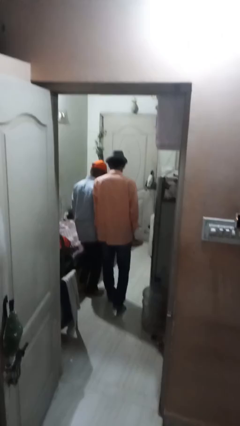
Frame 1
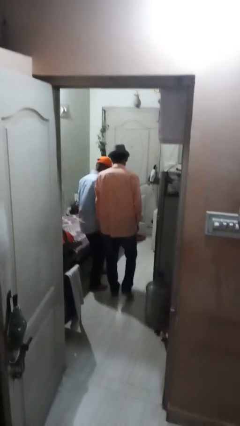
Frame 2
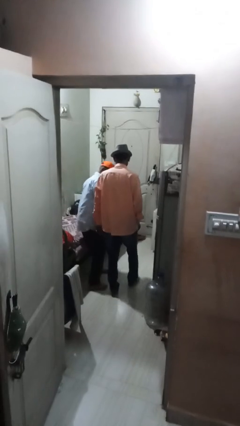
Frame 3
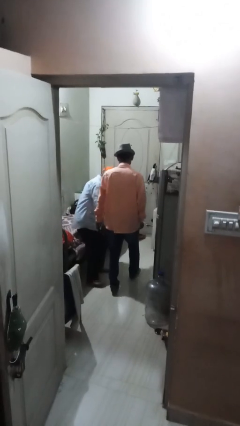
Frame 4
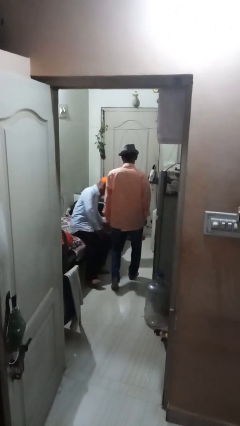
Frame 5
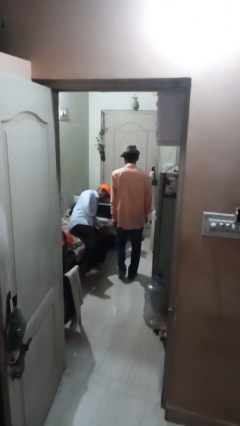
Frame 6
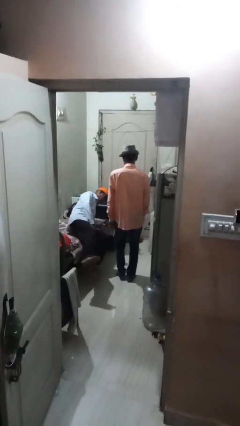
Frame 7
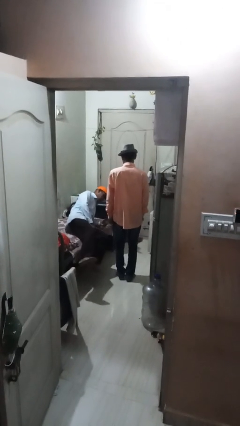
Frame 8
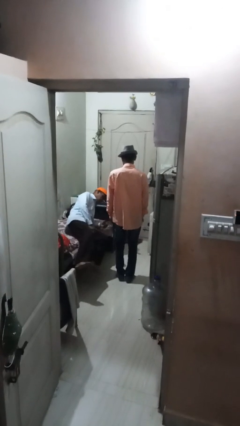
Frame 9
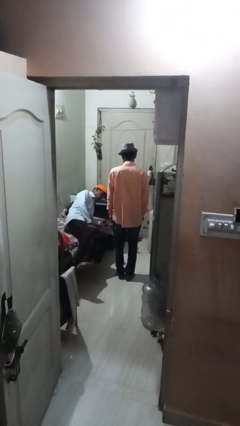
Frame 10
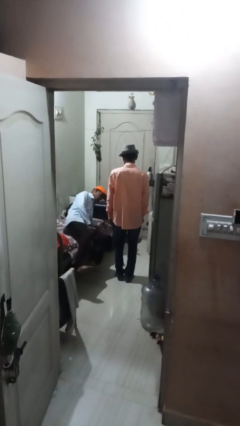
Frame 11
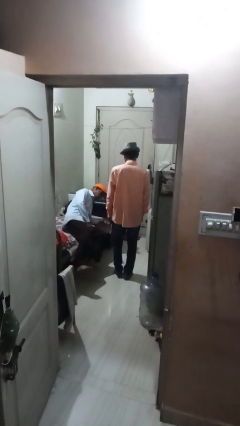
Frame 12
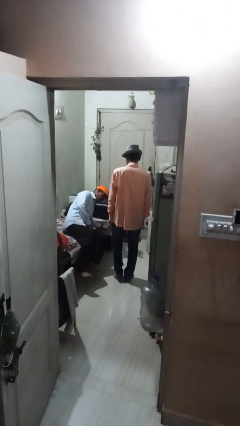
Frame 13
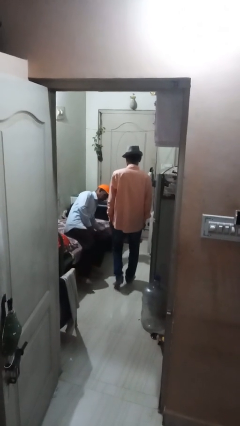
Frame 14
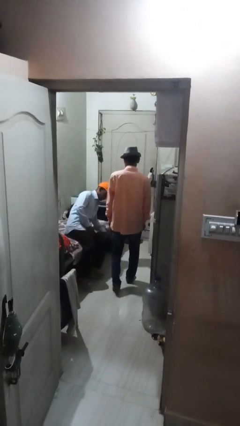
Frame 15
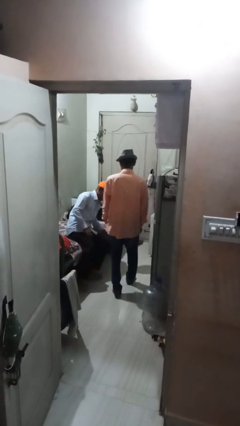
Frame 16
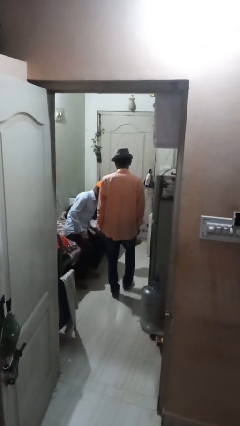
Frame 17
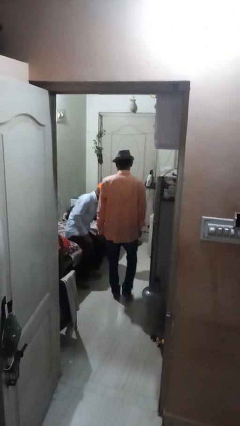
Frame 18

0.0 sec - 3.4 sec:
person bumps into person

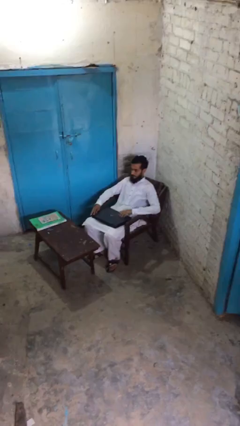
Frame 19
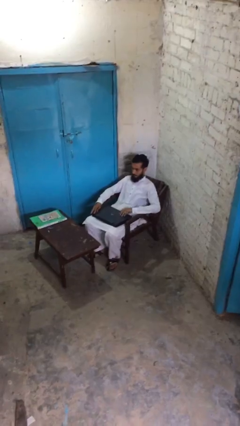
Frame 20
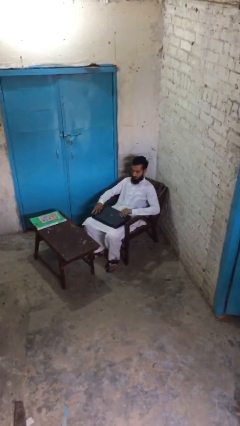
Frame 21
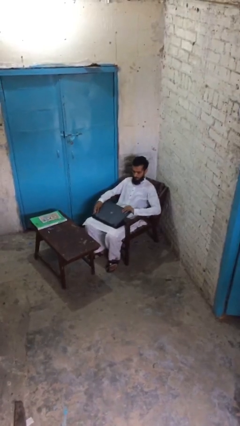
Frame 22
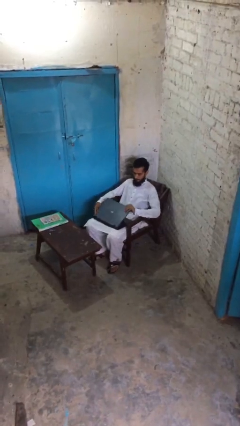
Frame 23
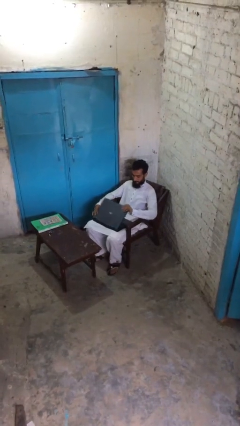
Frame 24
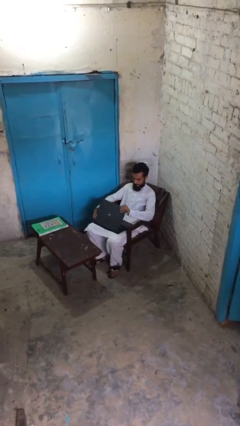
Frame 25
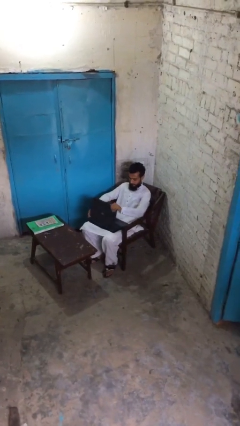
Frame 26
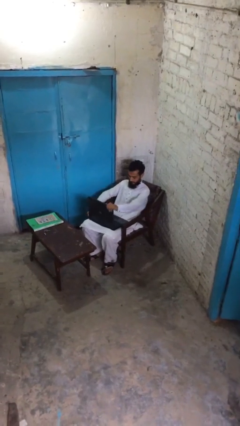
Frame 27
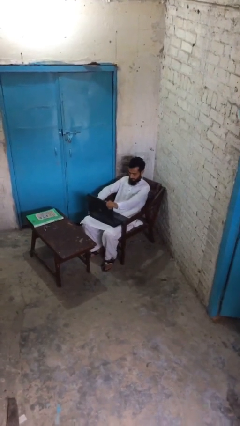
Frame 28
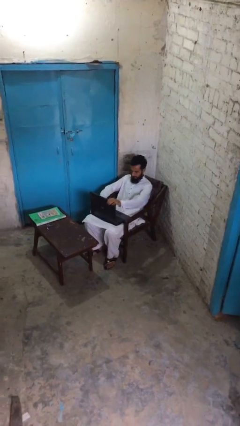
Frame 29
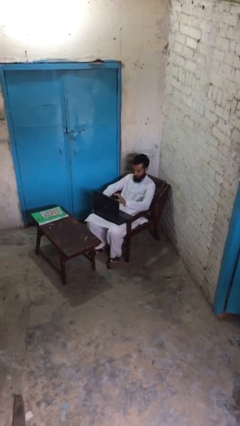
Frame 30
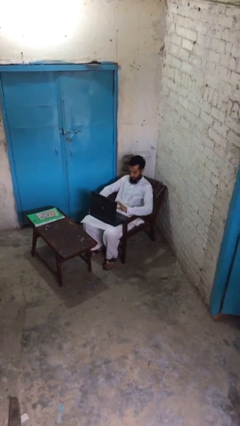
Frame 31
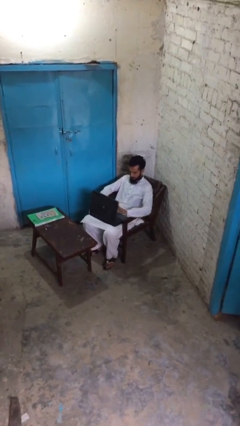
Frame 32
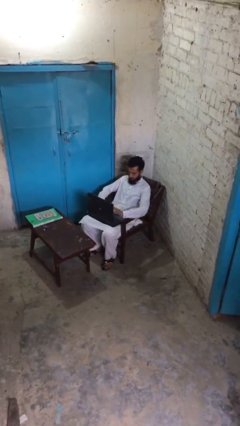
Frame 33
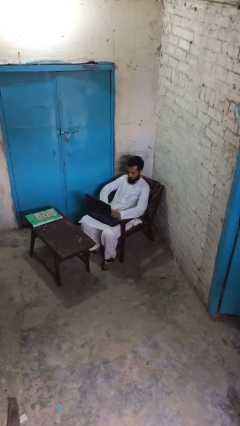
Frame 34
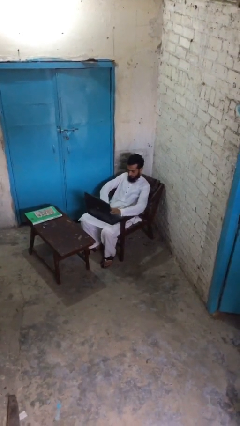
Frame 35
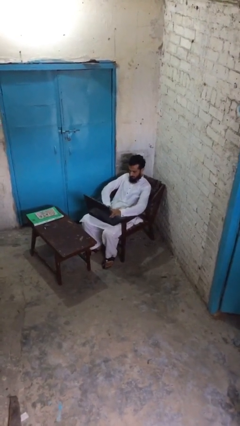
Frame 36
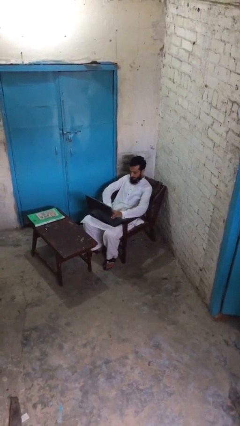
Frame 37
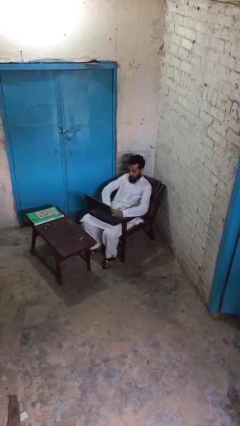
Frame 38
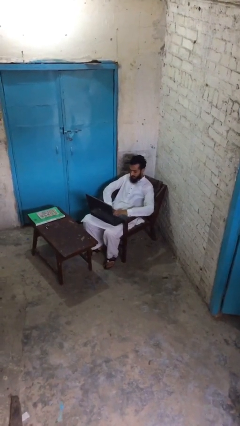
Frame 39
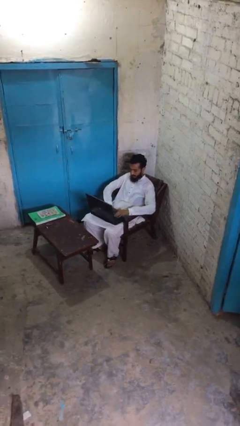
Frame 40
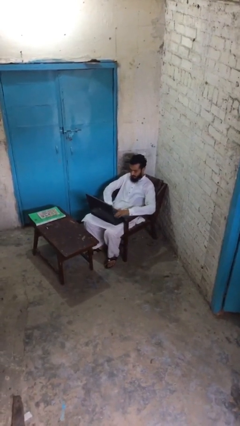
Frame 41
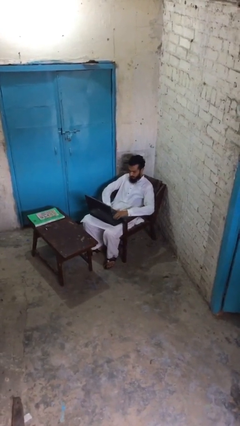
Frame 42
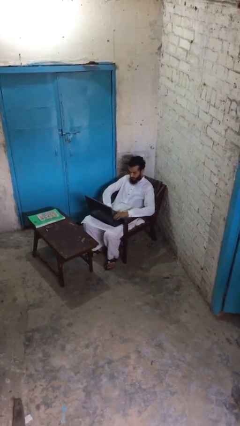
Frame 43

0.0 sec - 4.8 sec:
person interacts with laptop

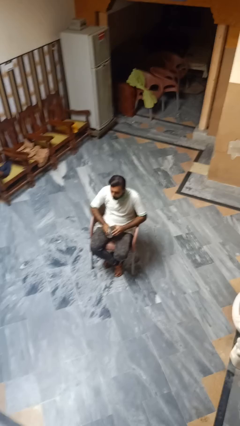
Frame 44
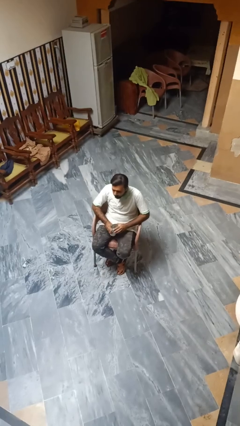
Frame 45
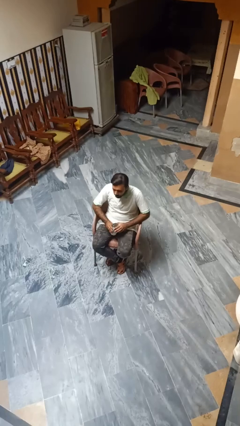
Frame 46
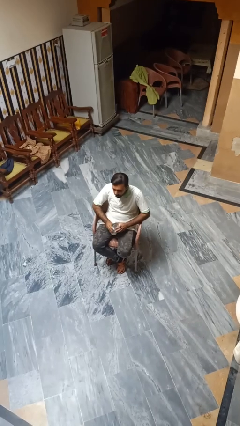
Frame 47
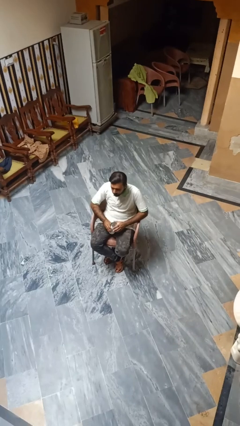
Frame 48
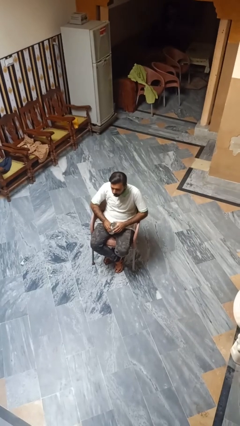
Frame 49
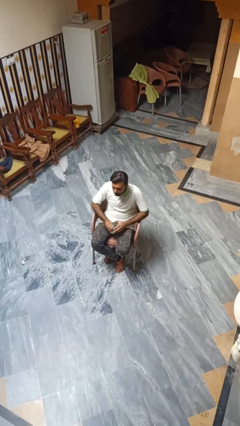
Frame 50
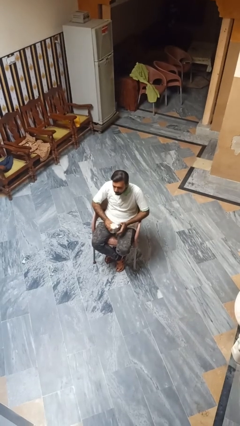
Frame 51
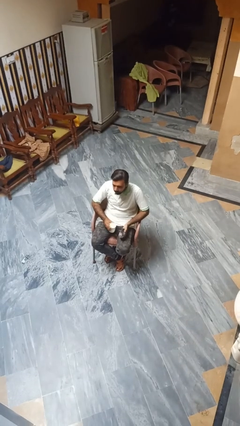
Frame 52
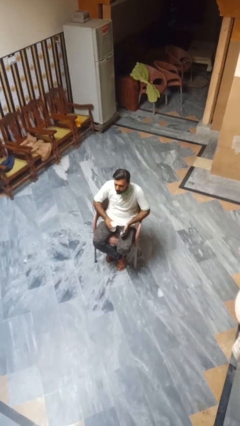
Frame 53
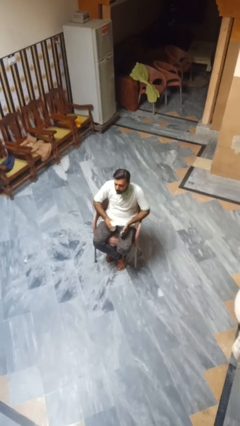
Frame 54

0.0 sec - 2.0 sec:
person opens beverage can

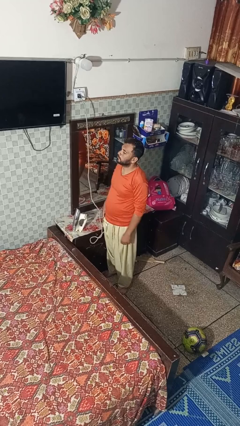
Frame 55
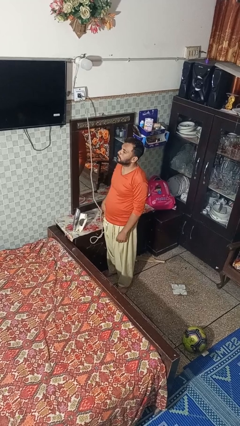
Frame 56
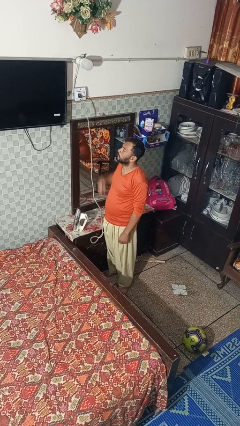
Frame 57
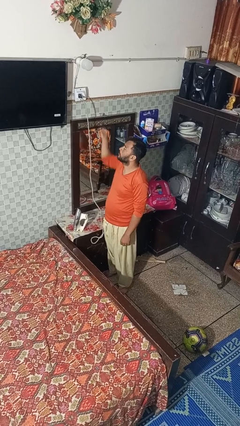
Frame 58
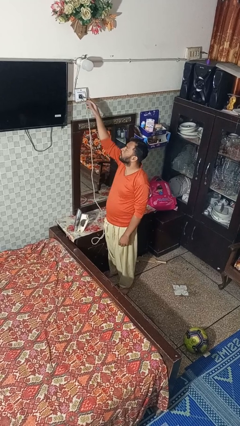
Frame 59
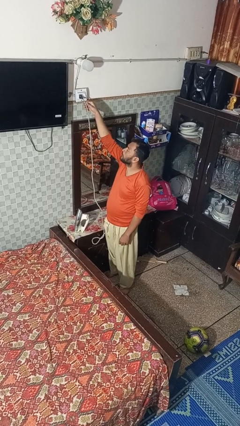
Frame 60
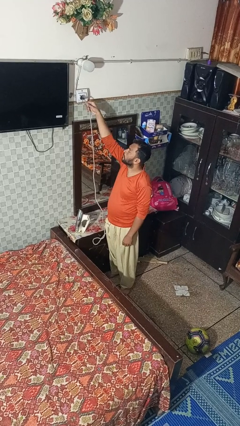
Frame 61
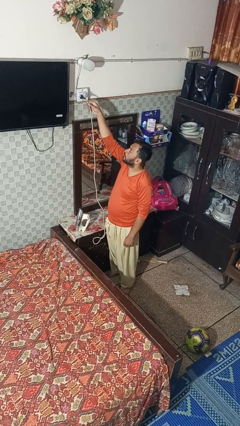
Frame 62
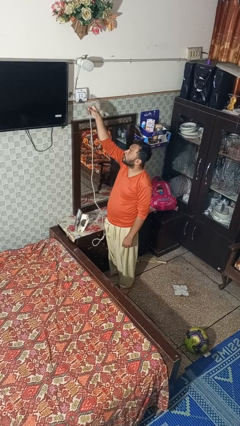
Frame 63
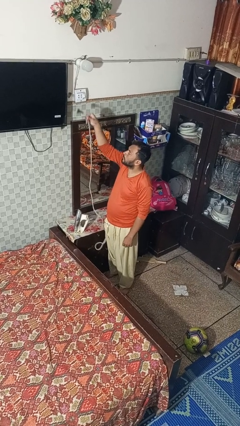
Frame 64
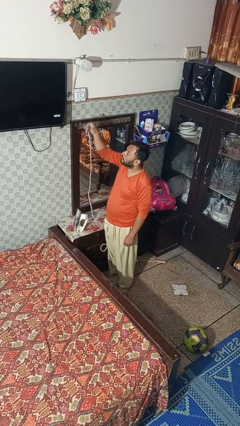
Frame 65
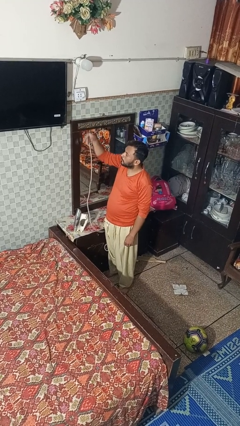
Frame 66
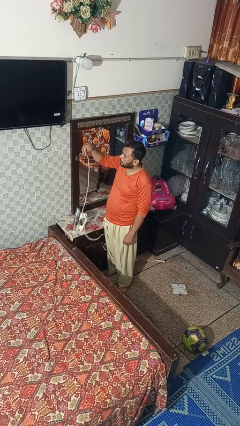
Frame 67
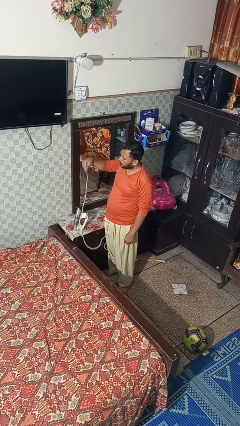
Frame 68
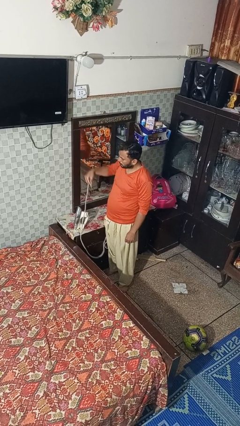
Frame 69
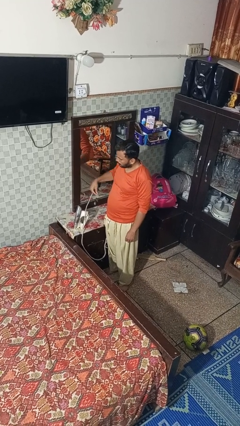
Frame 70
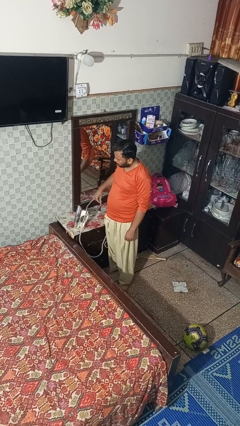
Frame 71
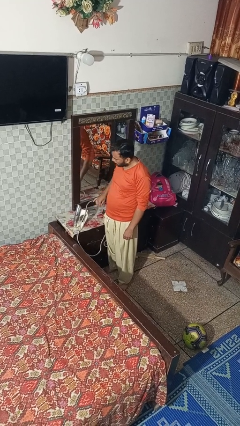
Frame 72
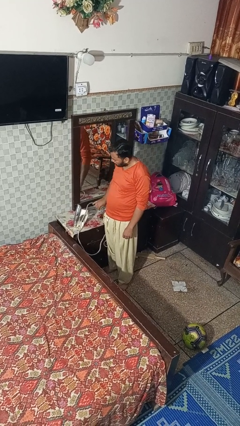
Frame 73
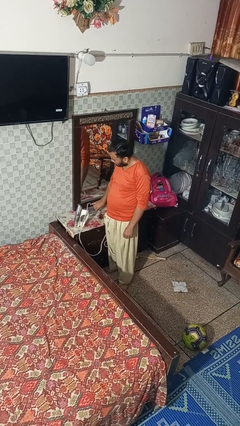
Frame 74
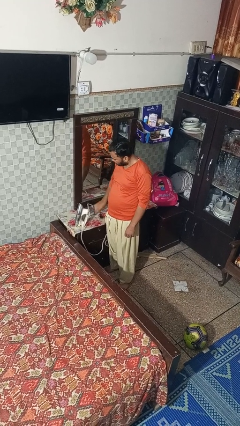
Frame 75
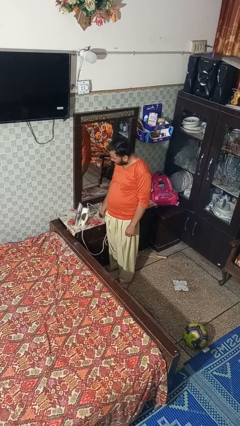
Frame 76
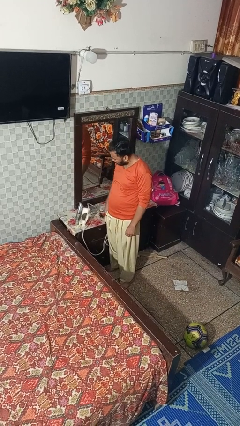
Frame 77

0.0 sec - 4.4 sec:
person unplugs from electrical socket

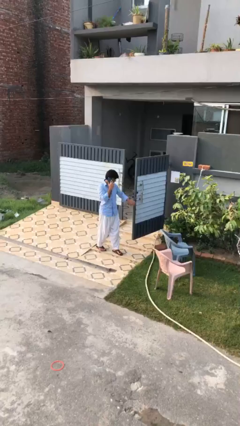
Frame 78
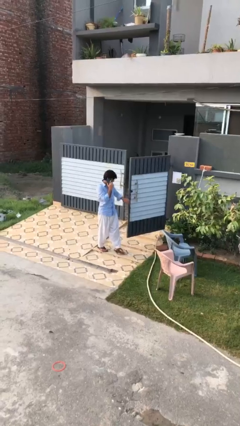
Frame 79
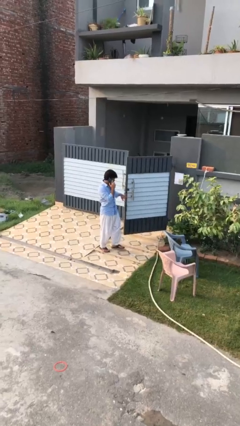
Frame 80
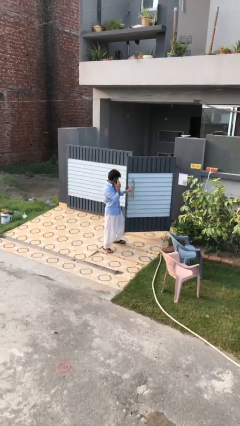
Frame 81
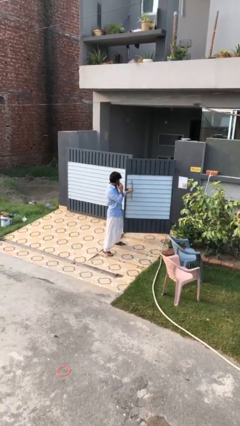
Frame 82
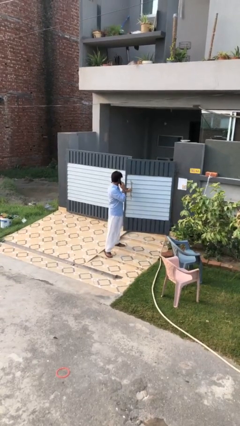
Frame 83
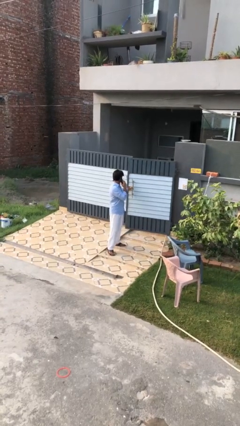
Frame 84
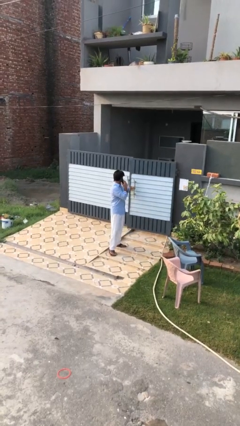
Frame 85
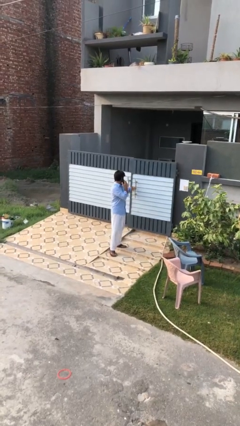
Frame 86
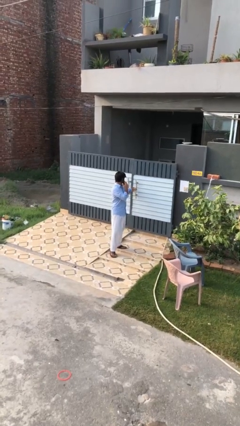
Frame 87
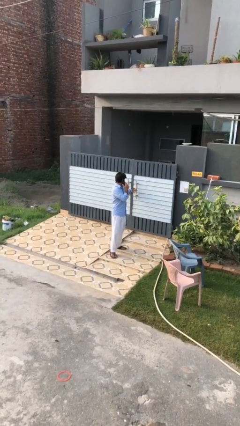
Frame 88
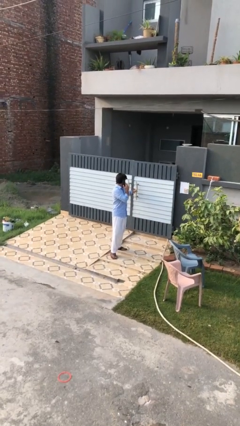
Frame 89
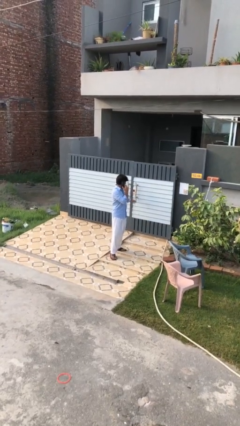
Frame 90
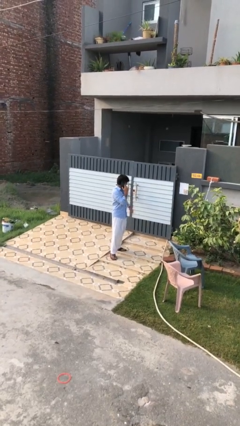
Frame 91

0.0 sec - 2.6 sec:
person closes facility door
